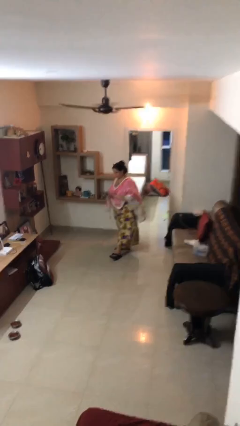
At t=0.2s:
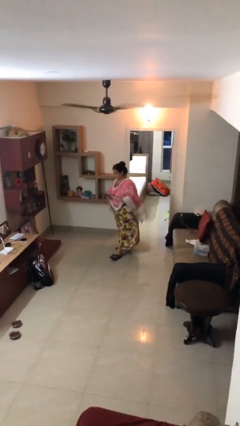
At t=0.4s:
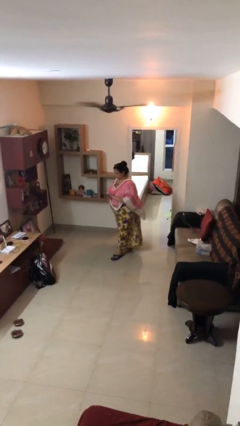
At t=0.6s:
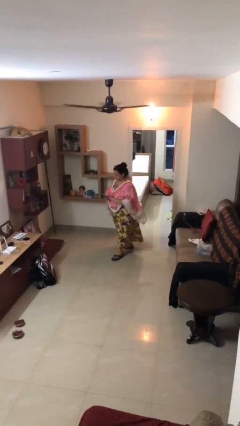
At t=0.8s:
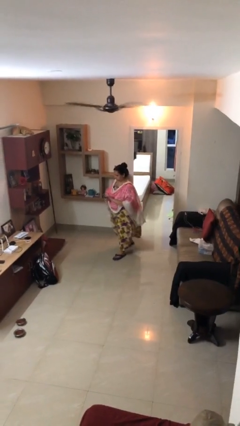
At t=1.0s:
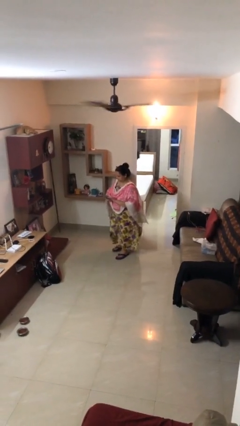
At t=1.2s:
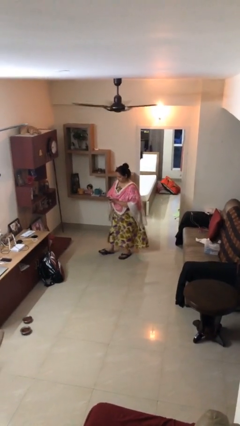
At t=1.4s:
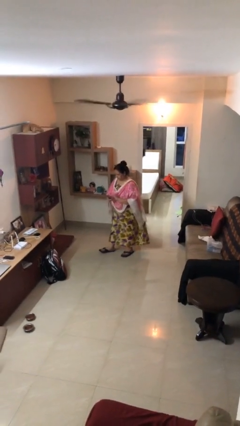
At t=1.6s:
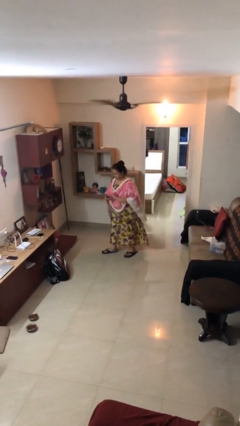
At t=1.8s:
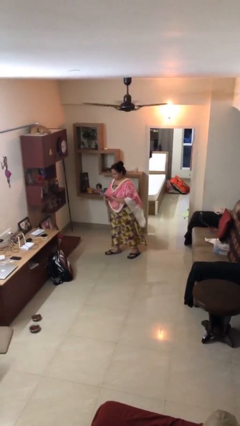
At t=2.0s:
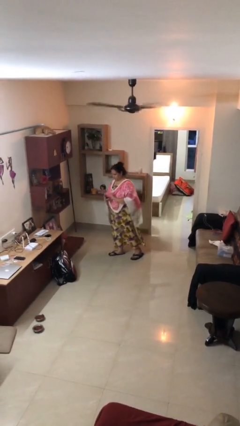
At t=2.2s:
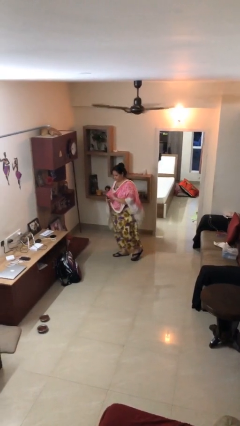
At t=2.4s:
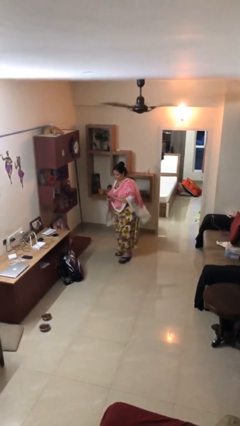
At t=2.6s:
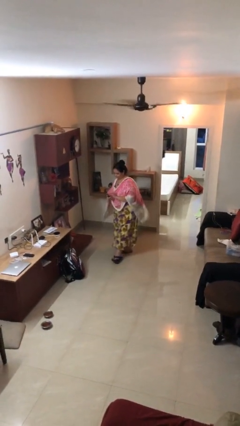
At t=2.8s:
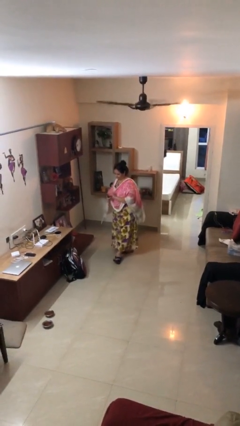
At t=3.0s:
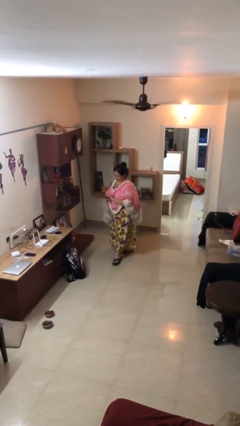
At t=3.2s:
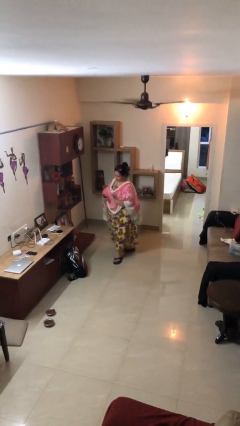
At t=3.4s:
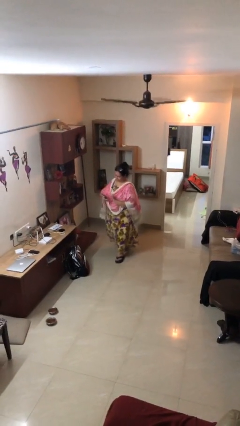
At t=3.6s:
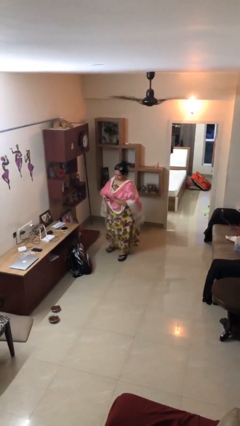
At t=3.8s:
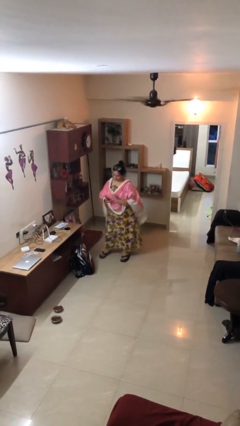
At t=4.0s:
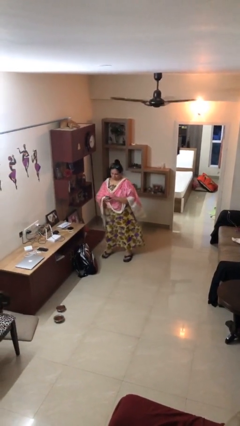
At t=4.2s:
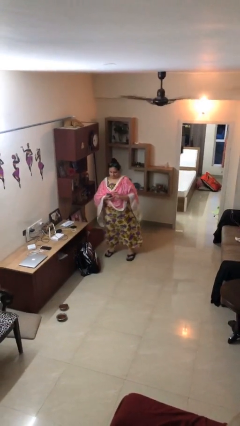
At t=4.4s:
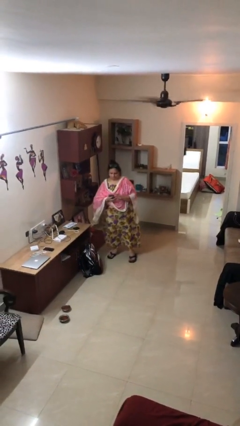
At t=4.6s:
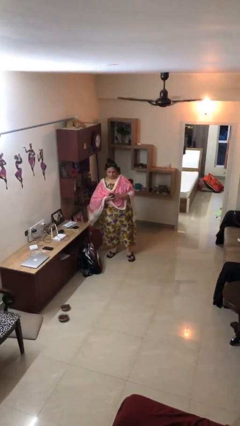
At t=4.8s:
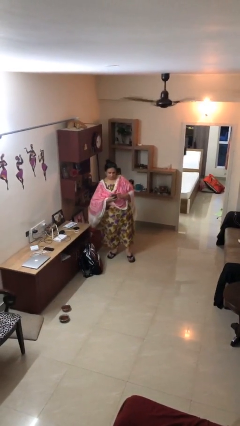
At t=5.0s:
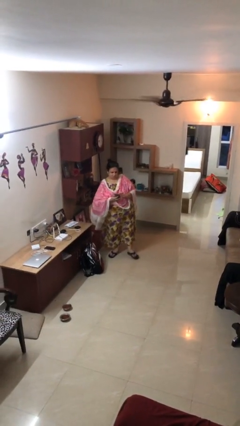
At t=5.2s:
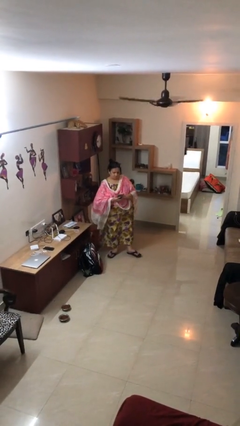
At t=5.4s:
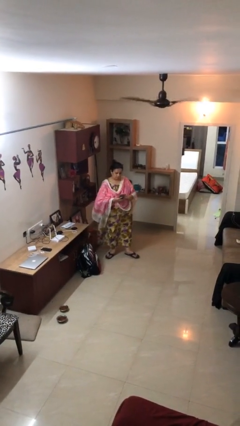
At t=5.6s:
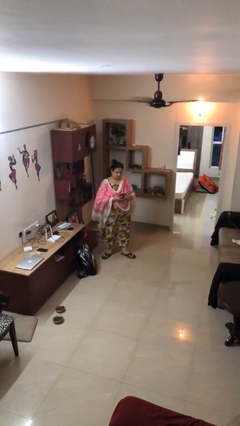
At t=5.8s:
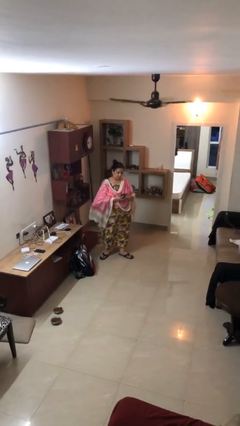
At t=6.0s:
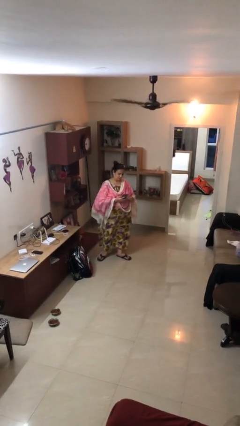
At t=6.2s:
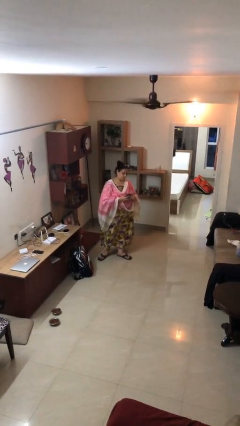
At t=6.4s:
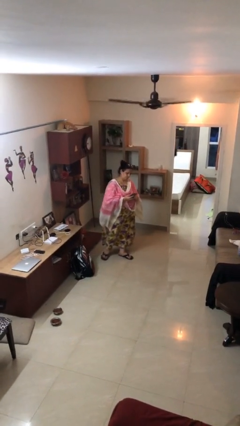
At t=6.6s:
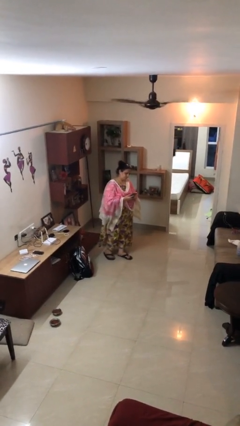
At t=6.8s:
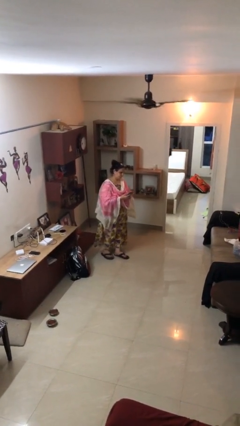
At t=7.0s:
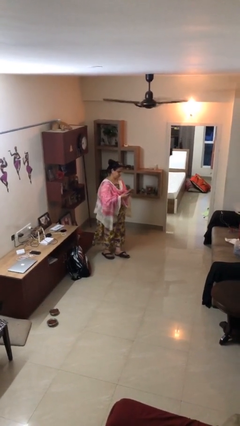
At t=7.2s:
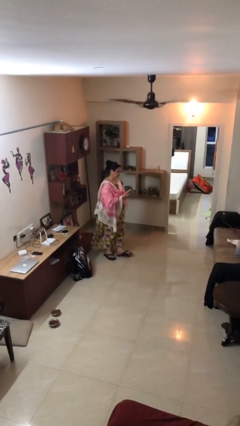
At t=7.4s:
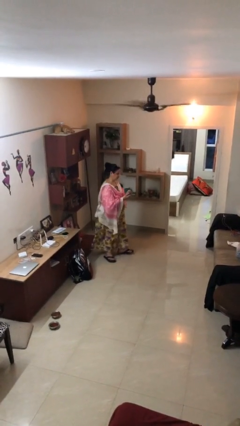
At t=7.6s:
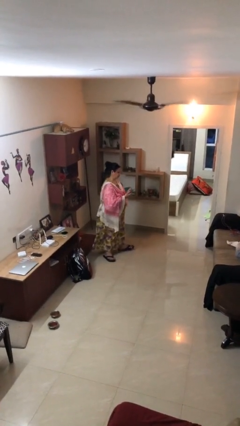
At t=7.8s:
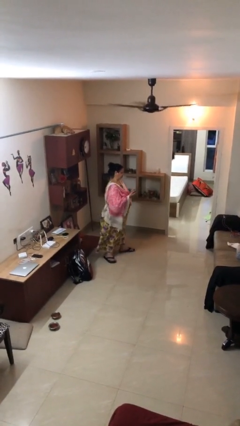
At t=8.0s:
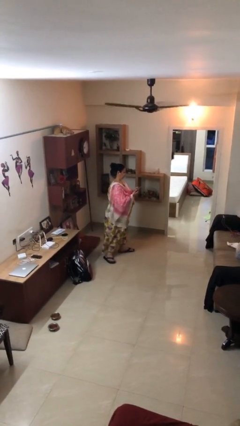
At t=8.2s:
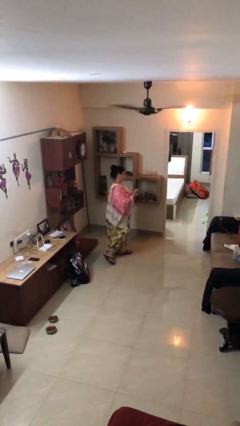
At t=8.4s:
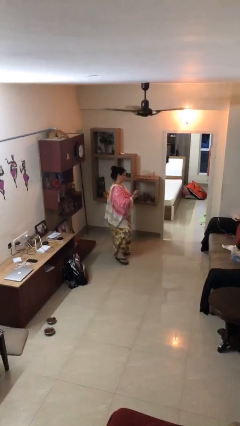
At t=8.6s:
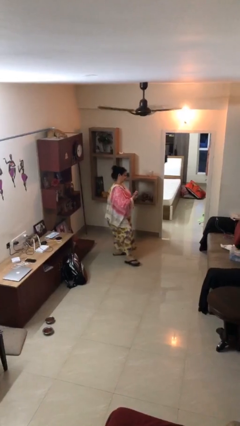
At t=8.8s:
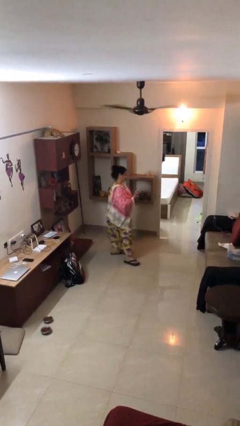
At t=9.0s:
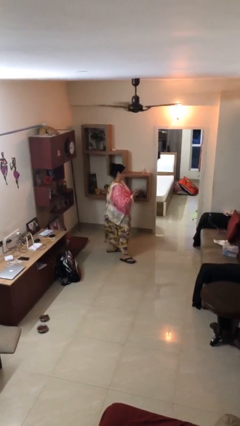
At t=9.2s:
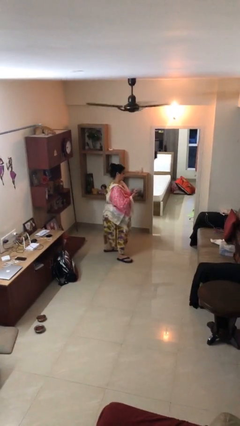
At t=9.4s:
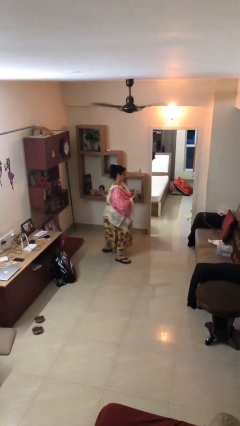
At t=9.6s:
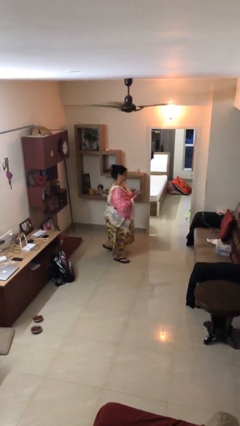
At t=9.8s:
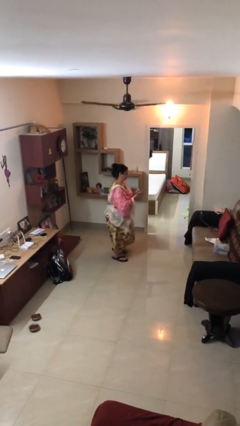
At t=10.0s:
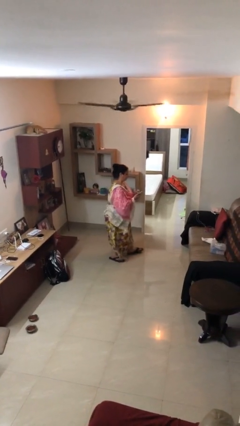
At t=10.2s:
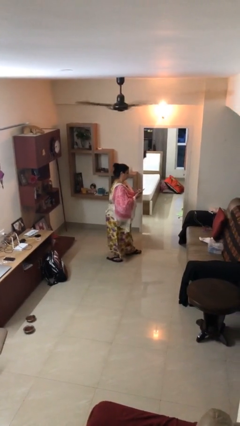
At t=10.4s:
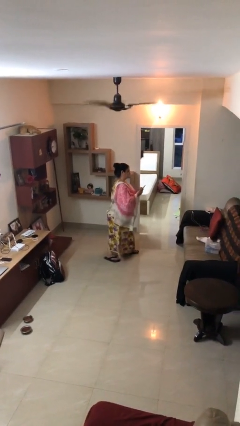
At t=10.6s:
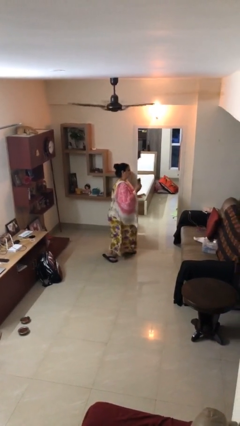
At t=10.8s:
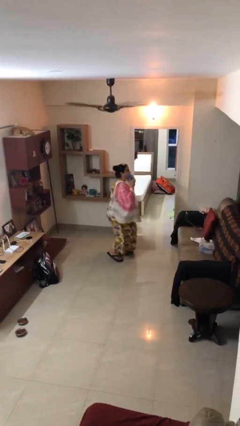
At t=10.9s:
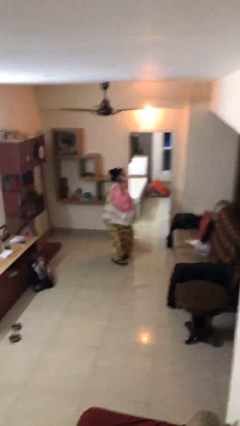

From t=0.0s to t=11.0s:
person texts on phone

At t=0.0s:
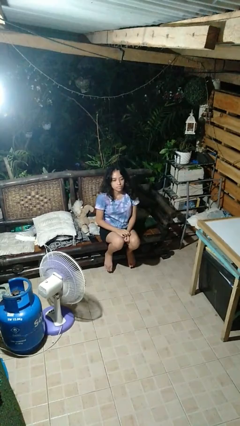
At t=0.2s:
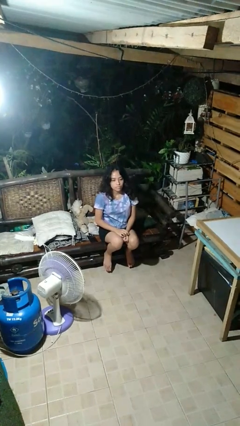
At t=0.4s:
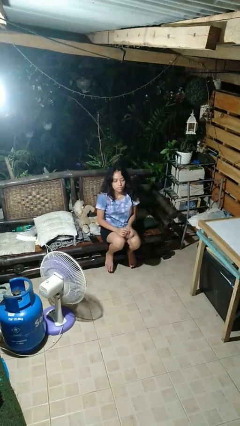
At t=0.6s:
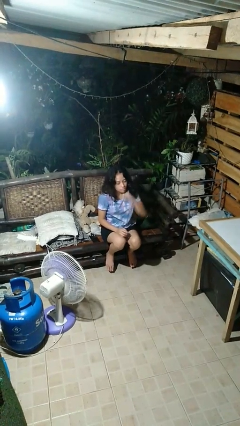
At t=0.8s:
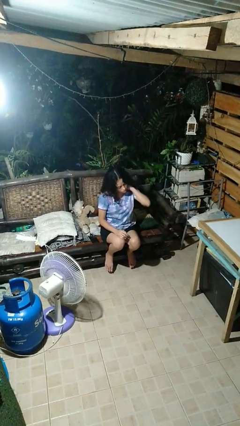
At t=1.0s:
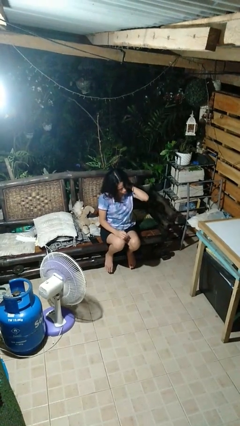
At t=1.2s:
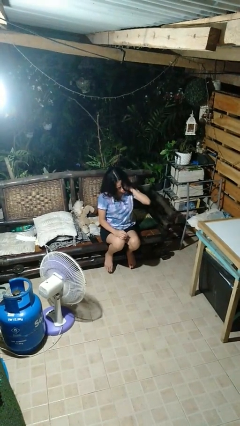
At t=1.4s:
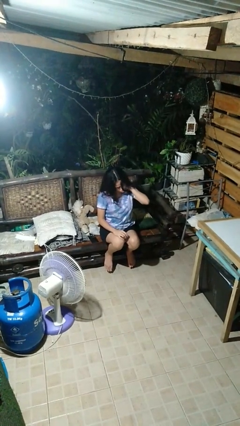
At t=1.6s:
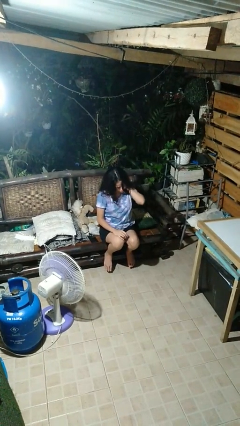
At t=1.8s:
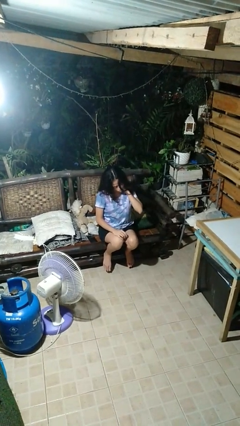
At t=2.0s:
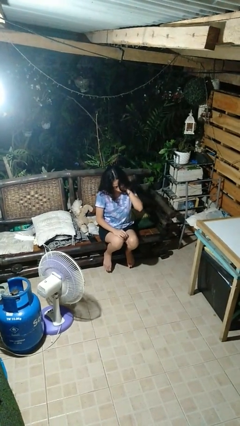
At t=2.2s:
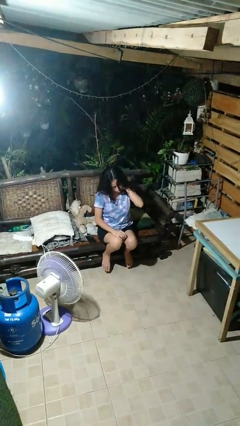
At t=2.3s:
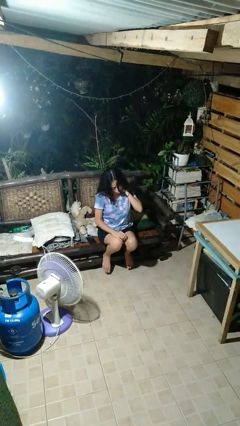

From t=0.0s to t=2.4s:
person rubs neck

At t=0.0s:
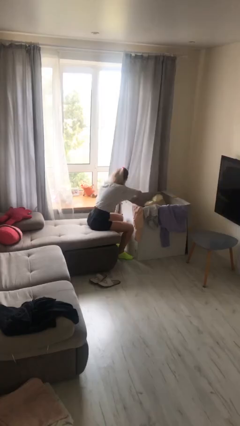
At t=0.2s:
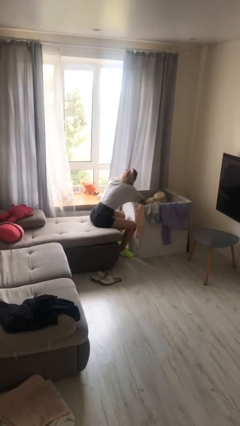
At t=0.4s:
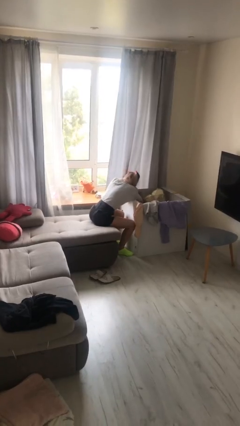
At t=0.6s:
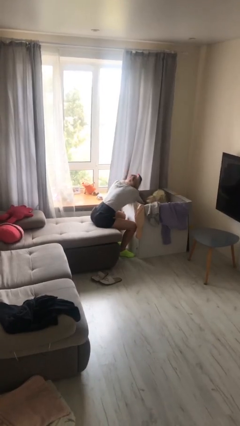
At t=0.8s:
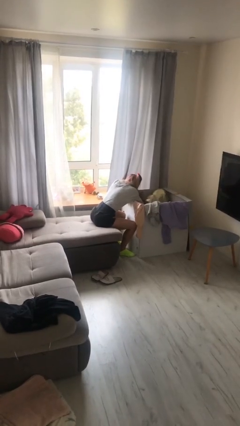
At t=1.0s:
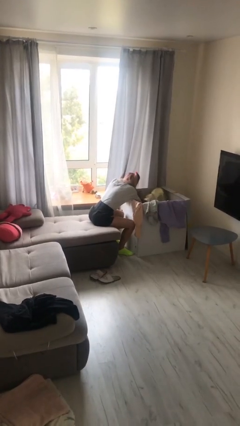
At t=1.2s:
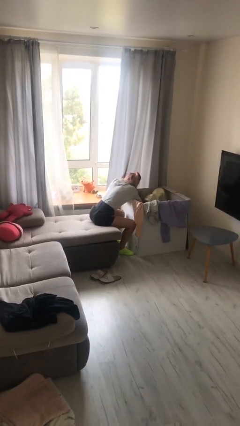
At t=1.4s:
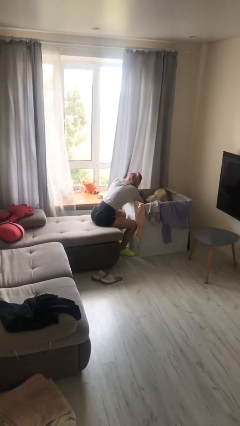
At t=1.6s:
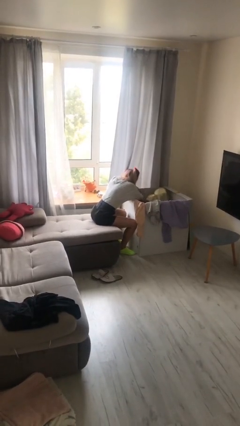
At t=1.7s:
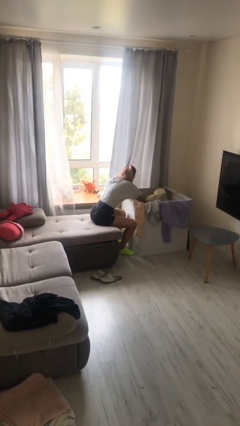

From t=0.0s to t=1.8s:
person searches in box

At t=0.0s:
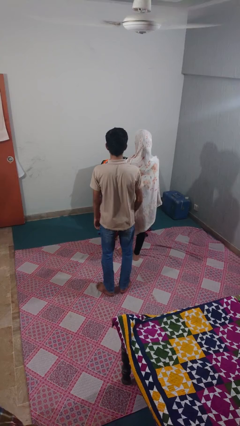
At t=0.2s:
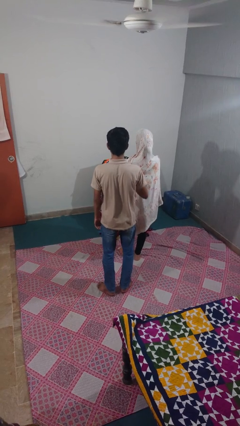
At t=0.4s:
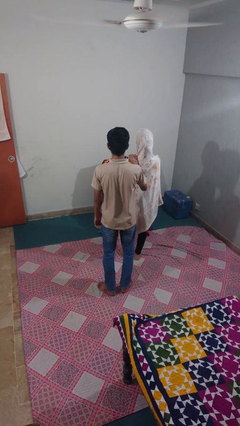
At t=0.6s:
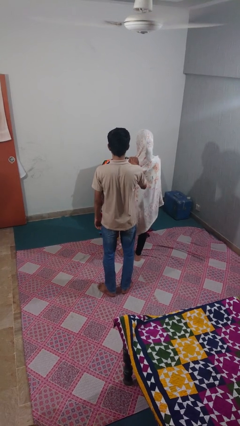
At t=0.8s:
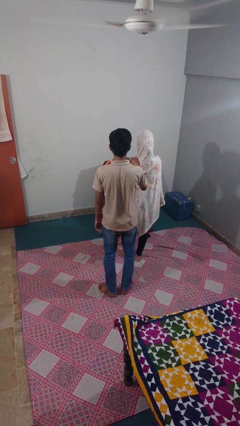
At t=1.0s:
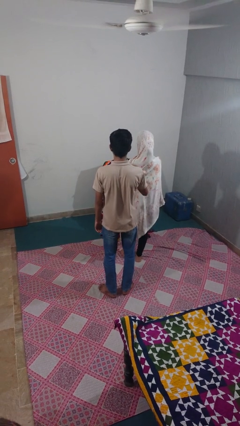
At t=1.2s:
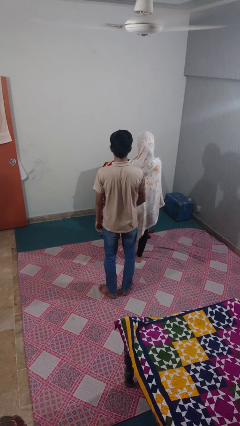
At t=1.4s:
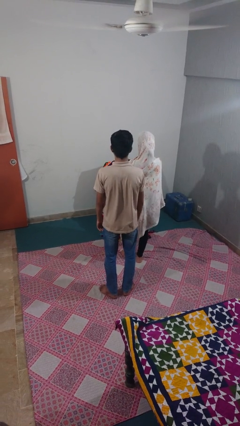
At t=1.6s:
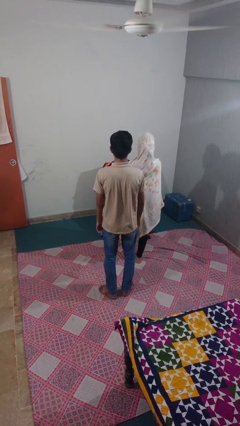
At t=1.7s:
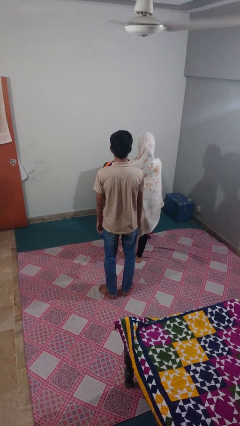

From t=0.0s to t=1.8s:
person touches back of person

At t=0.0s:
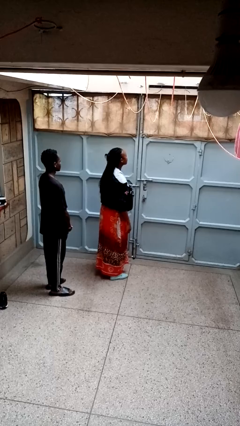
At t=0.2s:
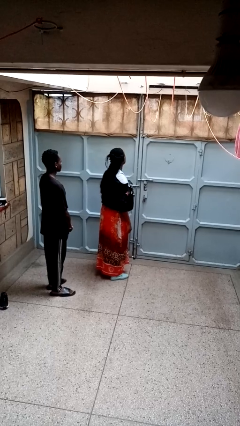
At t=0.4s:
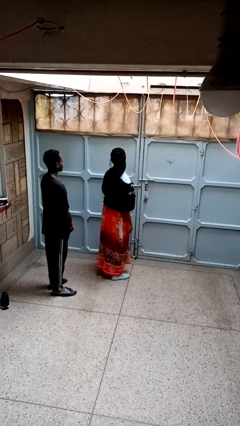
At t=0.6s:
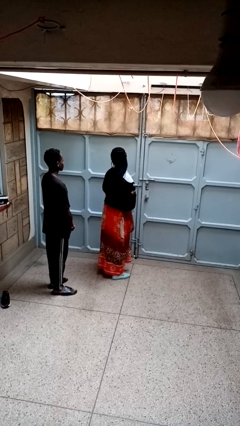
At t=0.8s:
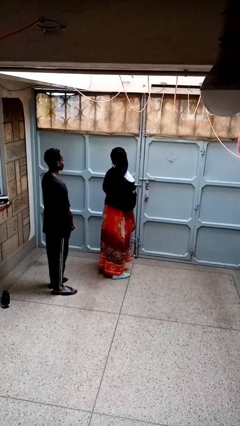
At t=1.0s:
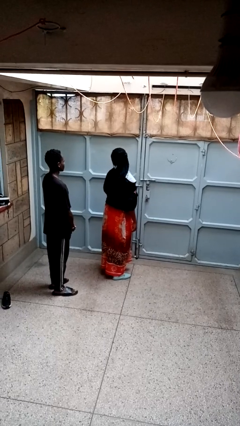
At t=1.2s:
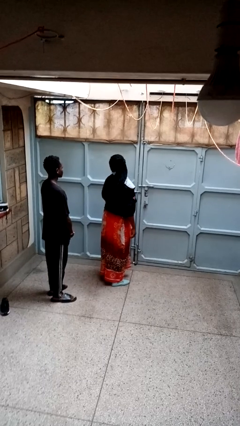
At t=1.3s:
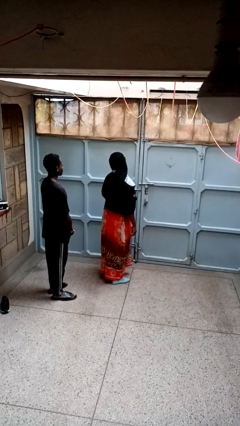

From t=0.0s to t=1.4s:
person looks over shoulder
